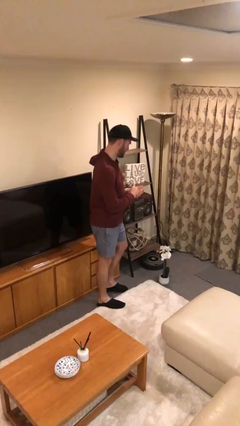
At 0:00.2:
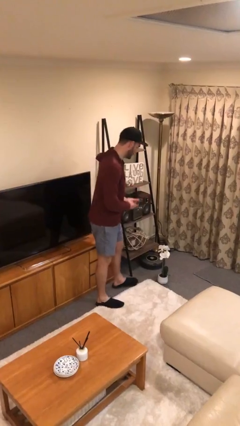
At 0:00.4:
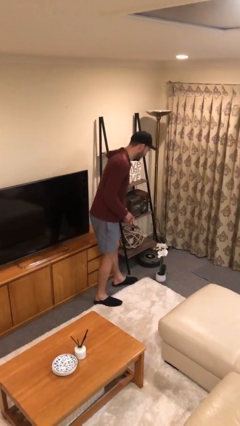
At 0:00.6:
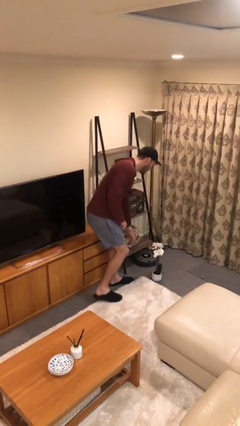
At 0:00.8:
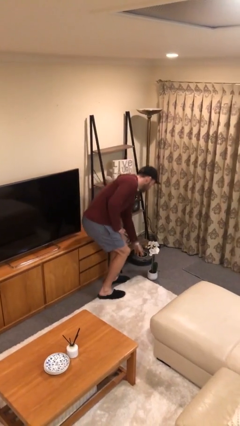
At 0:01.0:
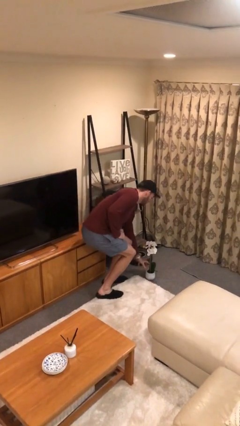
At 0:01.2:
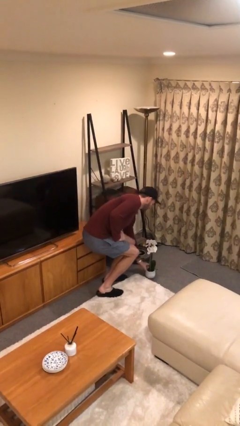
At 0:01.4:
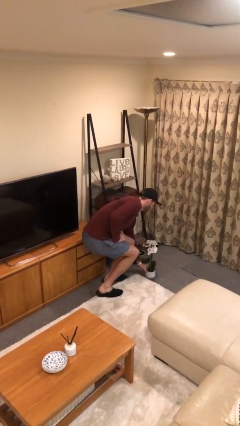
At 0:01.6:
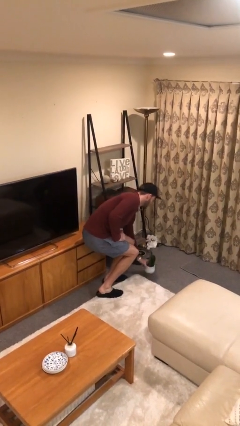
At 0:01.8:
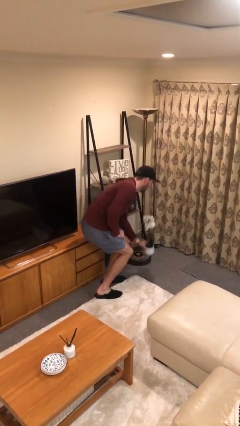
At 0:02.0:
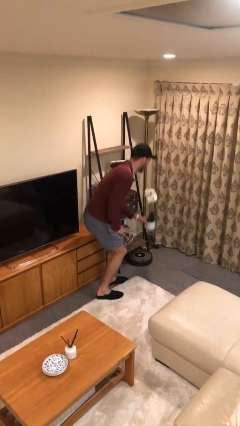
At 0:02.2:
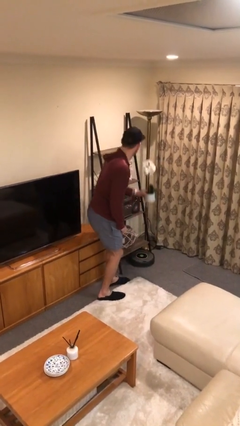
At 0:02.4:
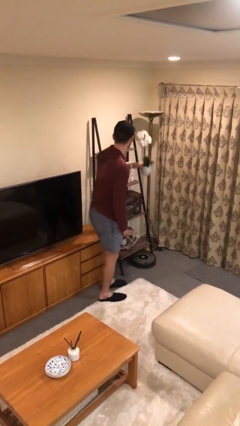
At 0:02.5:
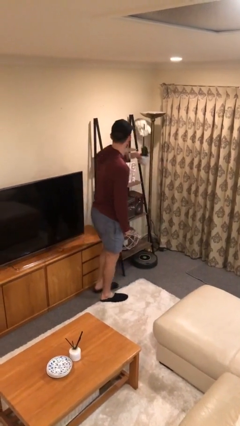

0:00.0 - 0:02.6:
person picks up object from floor

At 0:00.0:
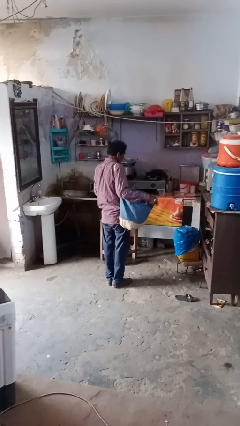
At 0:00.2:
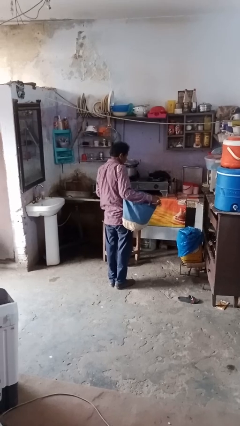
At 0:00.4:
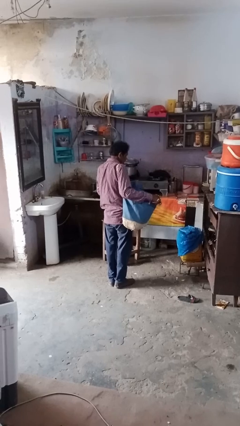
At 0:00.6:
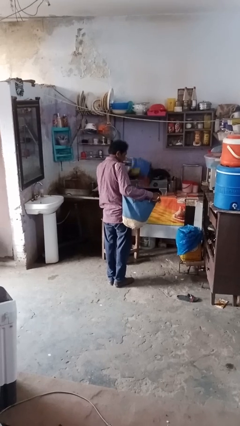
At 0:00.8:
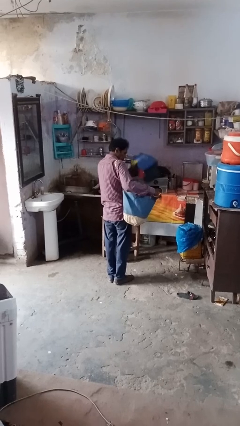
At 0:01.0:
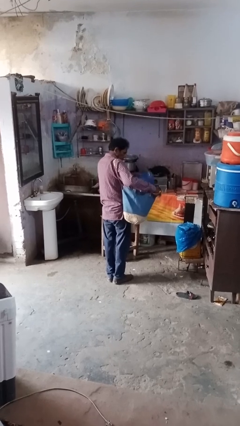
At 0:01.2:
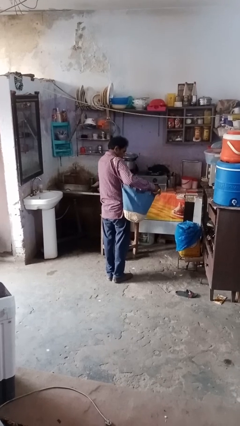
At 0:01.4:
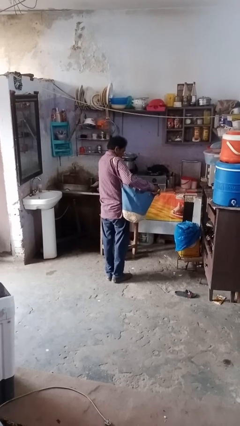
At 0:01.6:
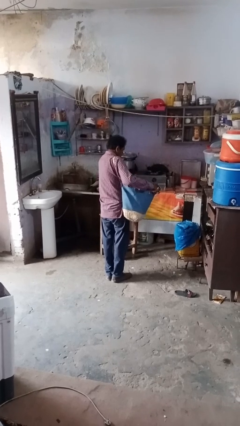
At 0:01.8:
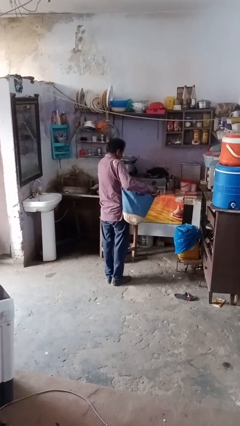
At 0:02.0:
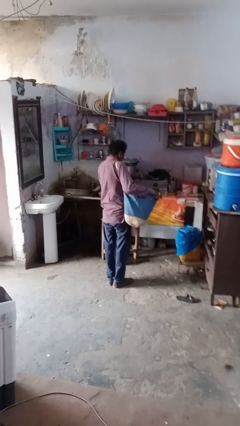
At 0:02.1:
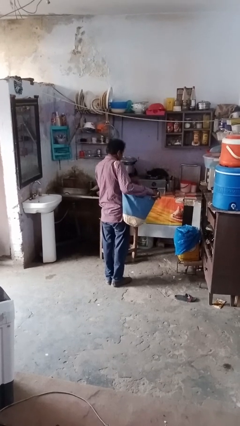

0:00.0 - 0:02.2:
person puts object into bag

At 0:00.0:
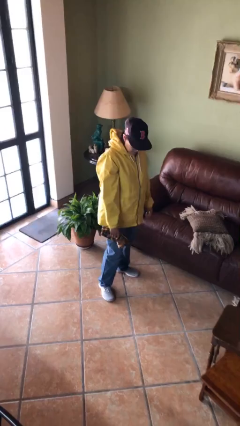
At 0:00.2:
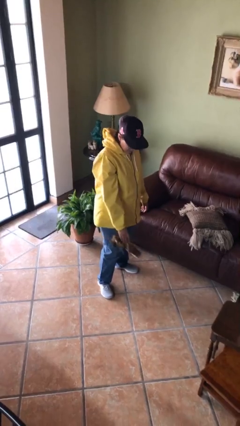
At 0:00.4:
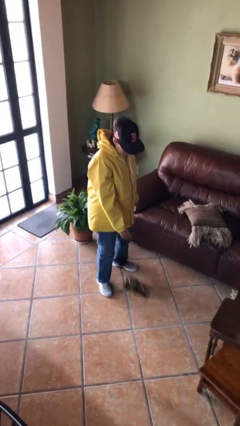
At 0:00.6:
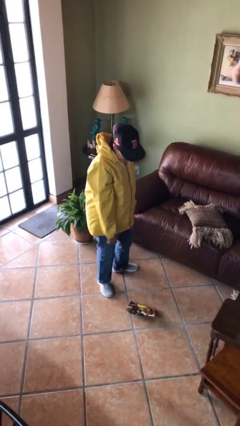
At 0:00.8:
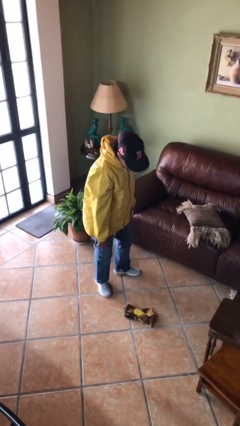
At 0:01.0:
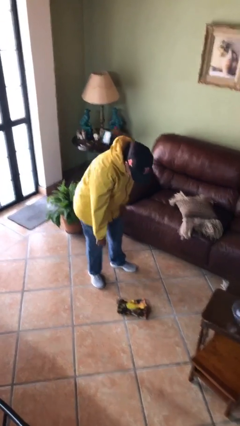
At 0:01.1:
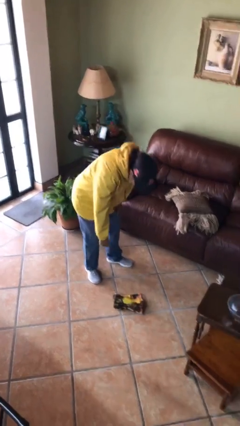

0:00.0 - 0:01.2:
person drops object

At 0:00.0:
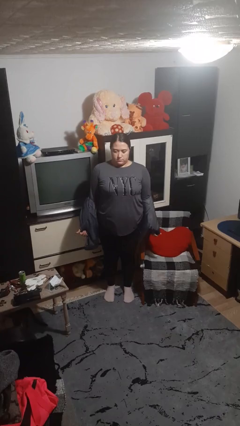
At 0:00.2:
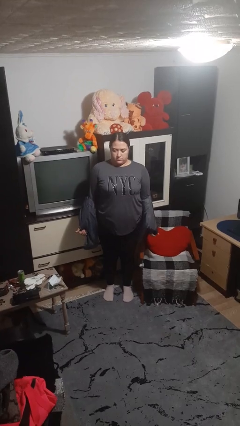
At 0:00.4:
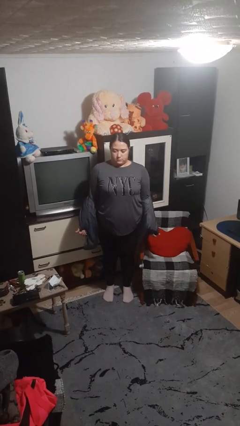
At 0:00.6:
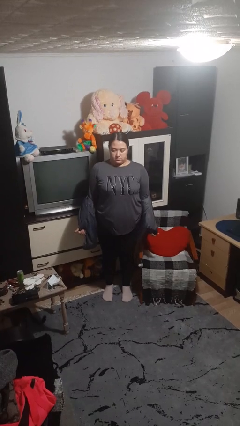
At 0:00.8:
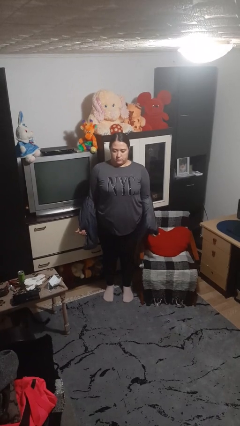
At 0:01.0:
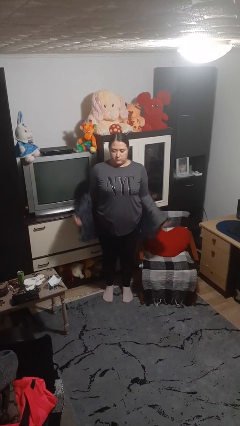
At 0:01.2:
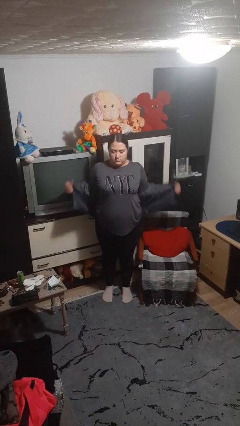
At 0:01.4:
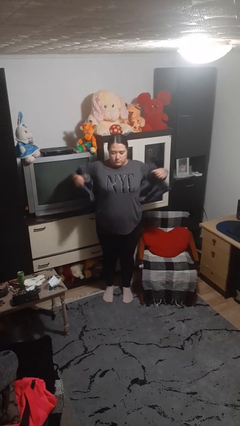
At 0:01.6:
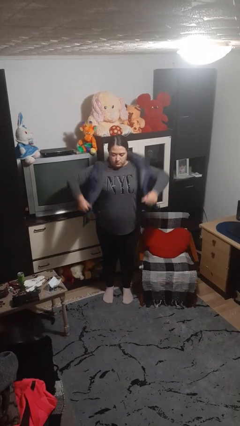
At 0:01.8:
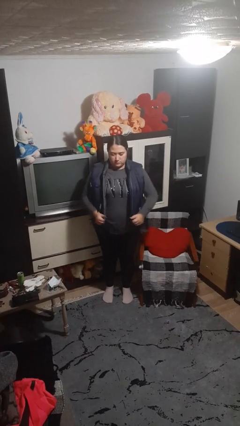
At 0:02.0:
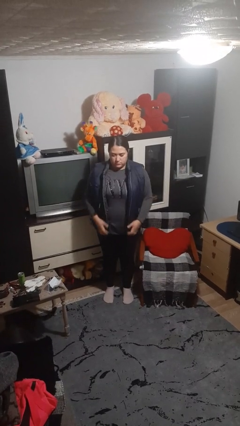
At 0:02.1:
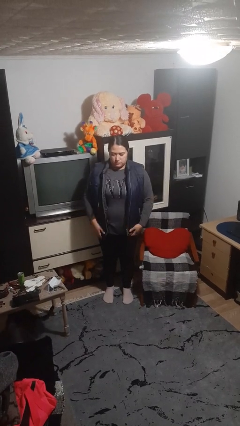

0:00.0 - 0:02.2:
person puts on jacket

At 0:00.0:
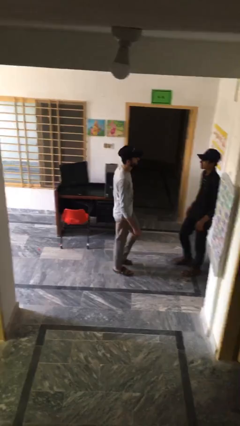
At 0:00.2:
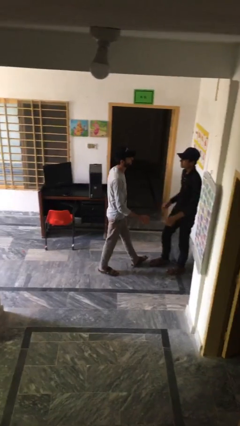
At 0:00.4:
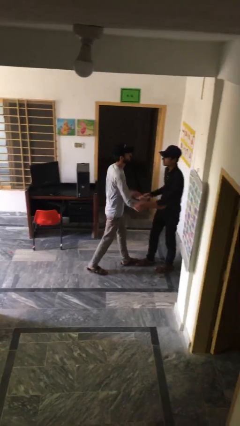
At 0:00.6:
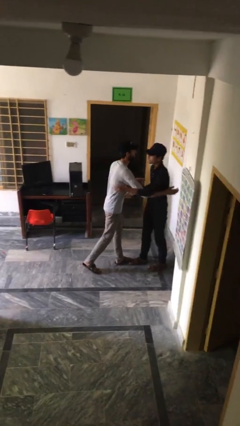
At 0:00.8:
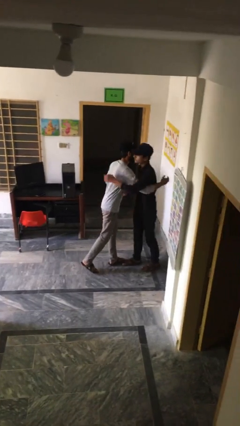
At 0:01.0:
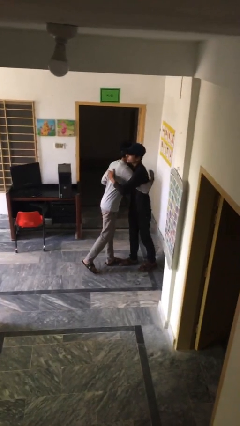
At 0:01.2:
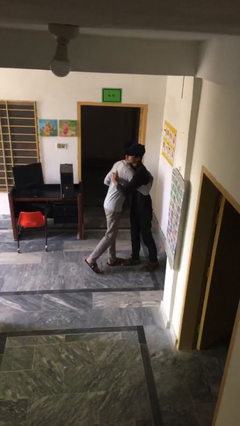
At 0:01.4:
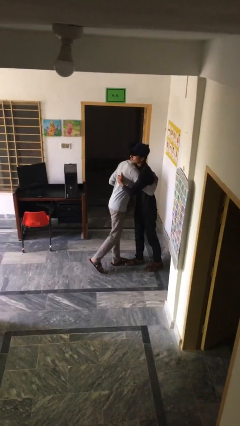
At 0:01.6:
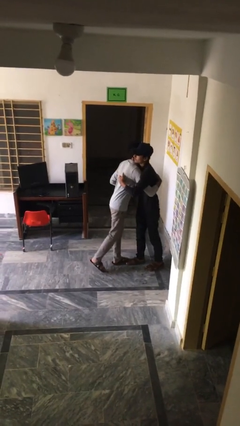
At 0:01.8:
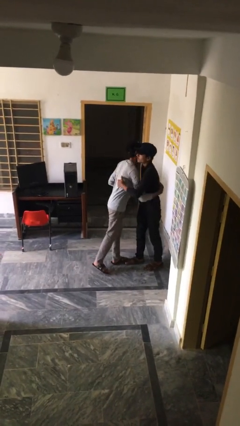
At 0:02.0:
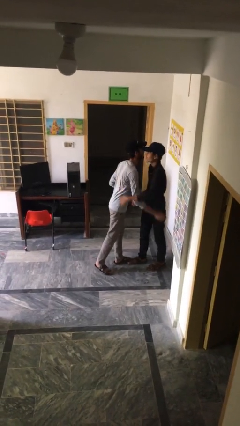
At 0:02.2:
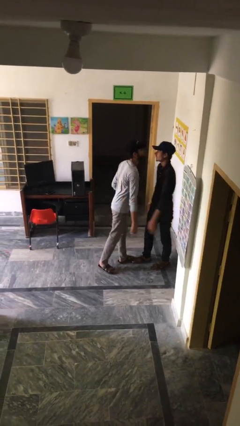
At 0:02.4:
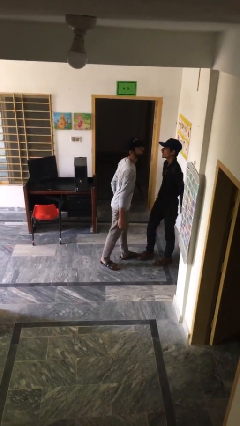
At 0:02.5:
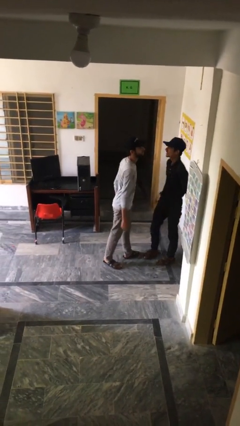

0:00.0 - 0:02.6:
person embraces person

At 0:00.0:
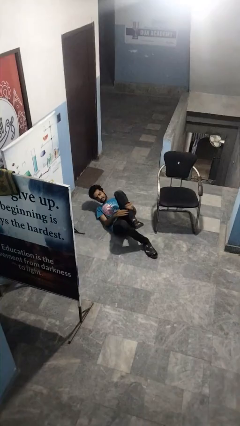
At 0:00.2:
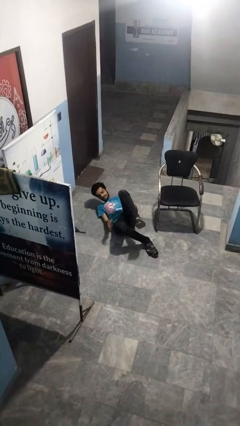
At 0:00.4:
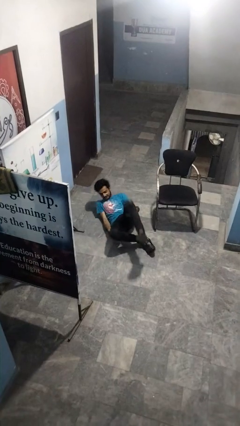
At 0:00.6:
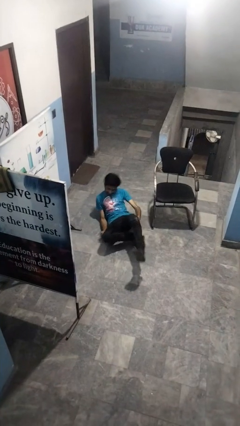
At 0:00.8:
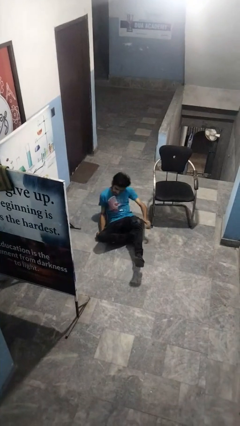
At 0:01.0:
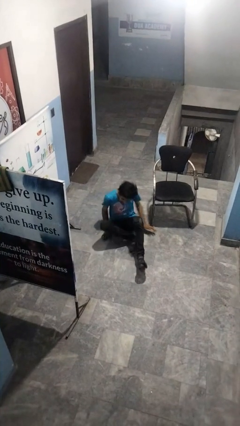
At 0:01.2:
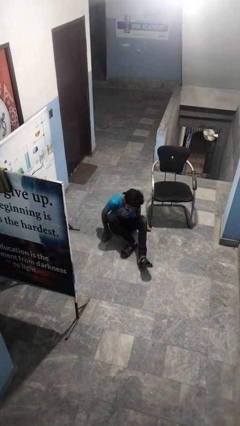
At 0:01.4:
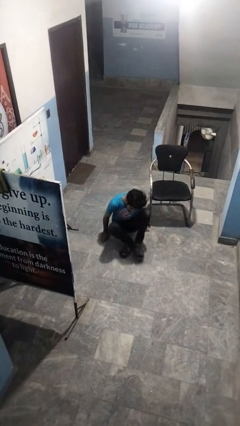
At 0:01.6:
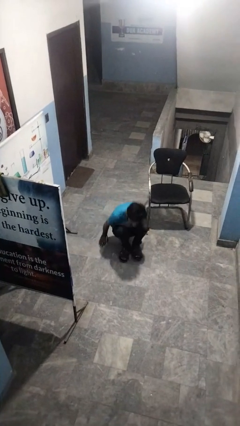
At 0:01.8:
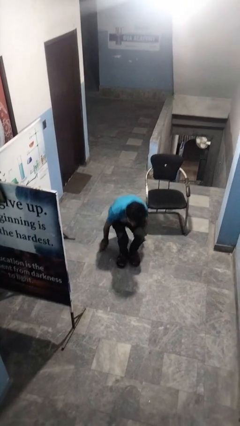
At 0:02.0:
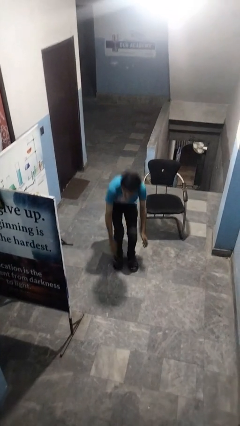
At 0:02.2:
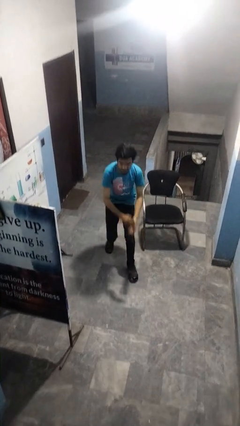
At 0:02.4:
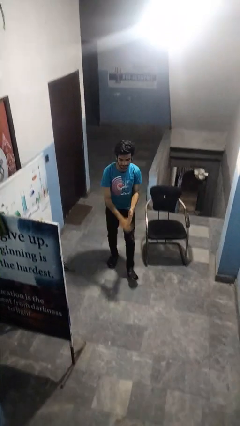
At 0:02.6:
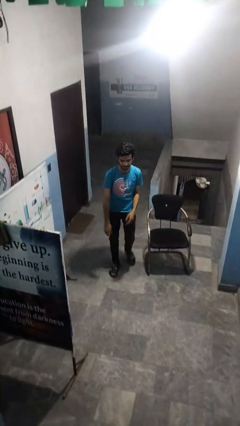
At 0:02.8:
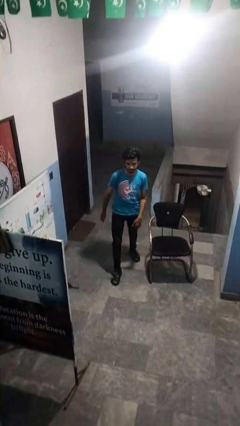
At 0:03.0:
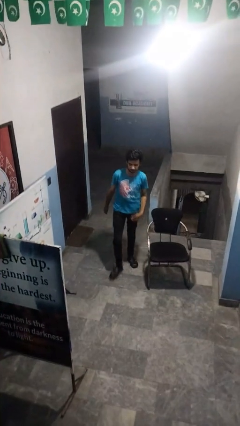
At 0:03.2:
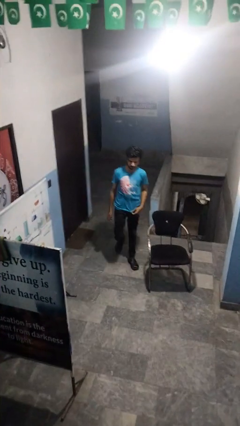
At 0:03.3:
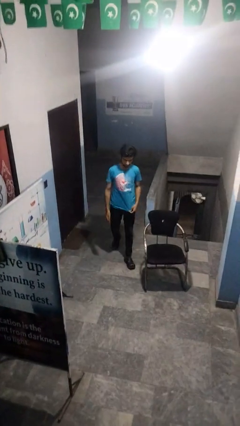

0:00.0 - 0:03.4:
person stands up from floor

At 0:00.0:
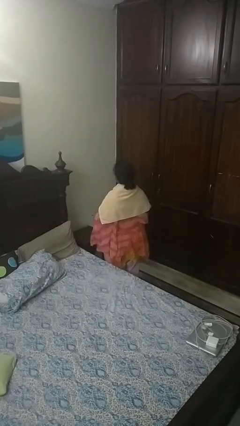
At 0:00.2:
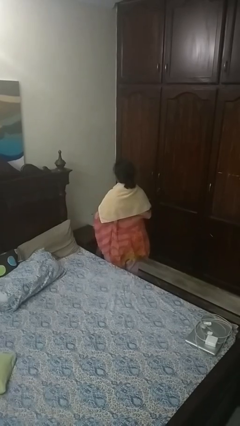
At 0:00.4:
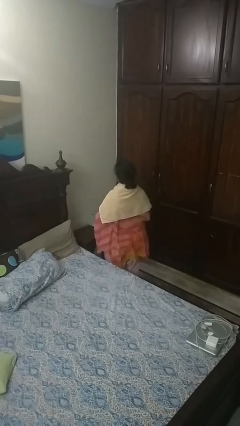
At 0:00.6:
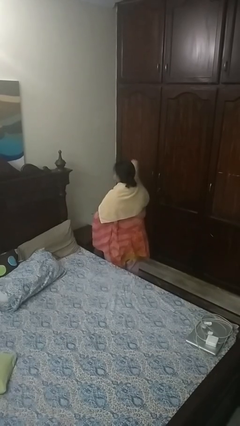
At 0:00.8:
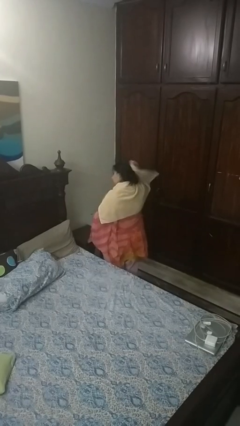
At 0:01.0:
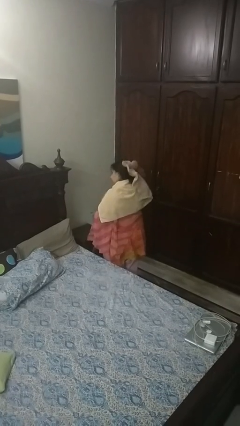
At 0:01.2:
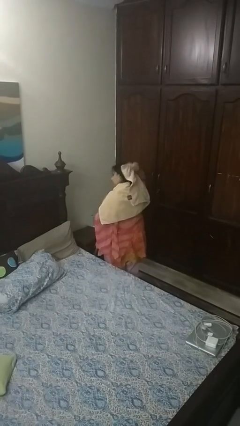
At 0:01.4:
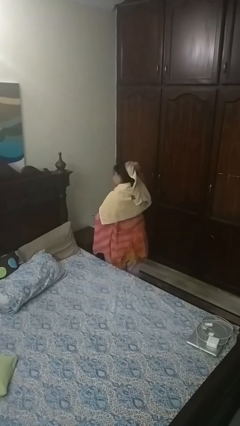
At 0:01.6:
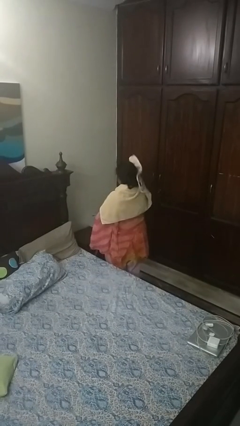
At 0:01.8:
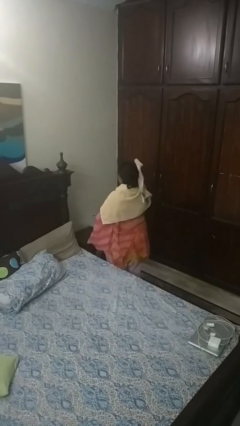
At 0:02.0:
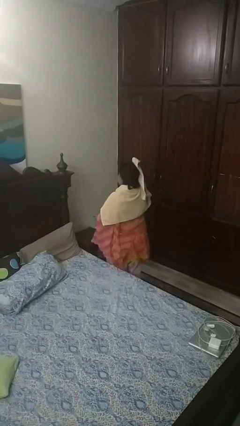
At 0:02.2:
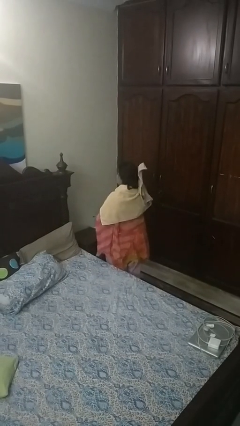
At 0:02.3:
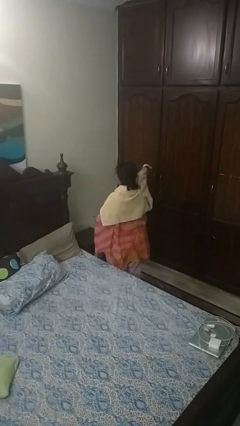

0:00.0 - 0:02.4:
person dries hair with towel

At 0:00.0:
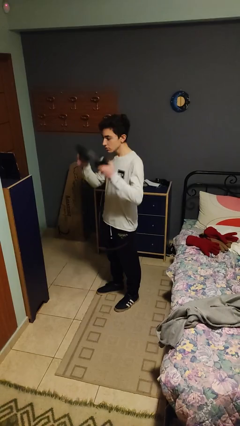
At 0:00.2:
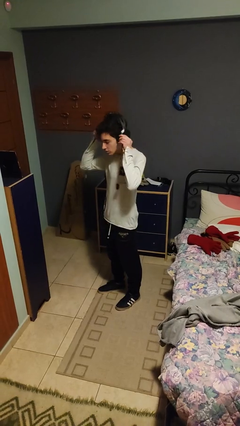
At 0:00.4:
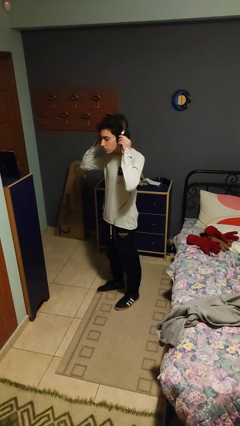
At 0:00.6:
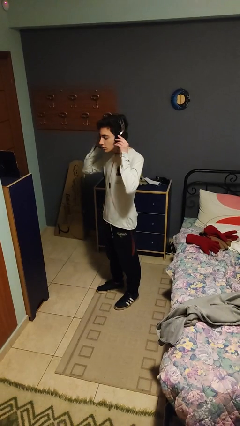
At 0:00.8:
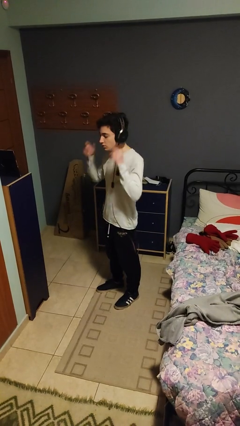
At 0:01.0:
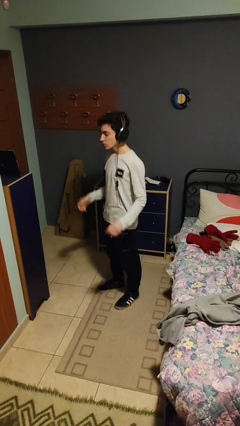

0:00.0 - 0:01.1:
person puts on headphones
